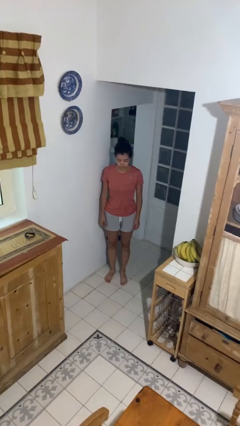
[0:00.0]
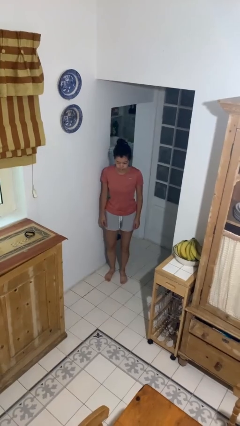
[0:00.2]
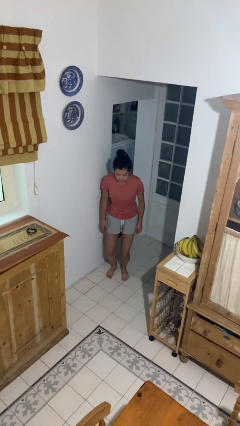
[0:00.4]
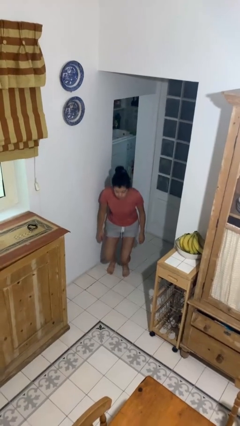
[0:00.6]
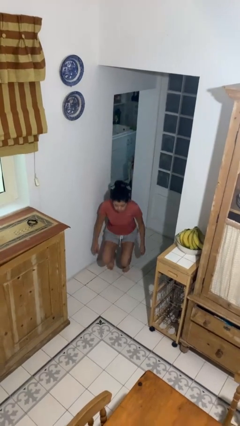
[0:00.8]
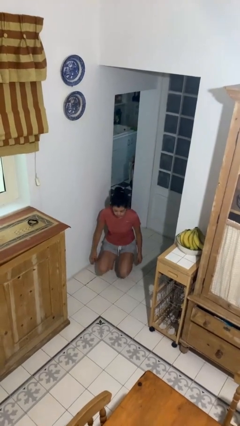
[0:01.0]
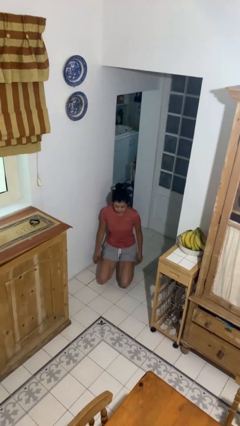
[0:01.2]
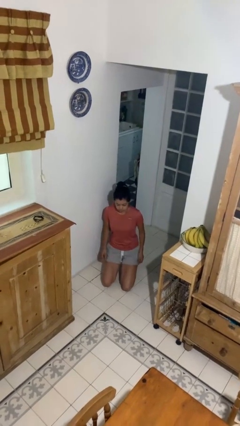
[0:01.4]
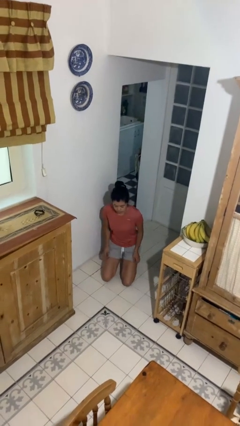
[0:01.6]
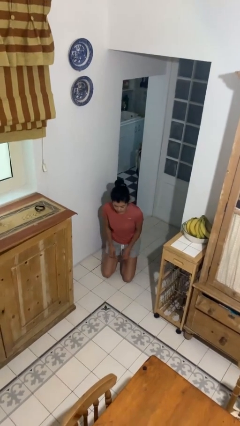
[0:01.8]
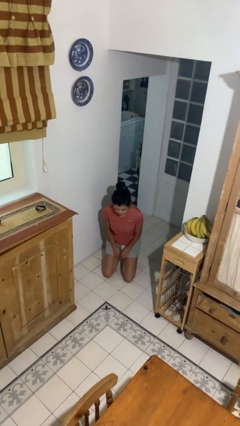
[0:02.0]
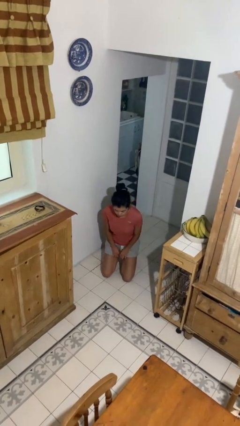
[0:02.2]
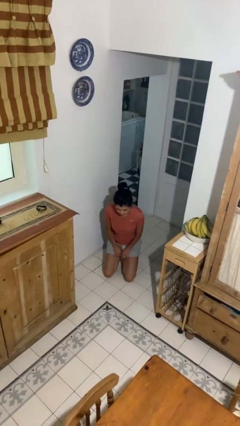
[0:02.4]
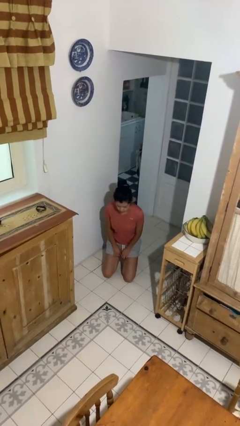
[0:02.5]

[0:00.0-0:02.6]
person kneels

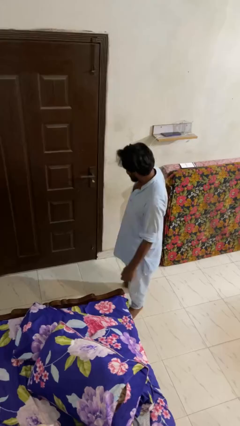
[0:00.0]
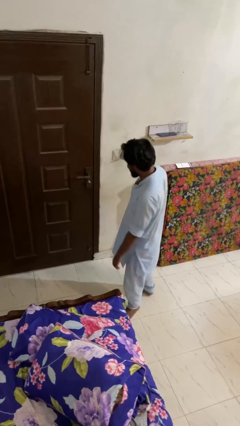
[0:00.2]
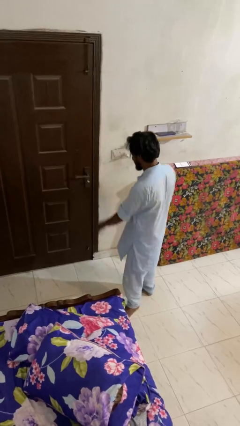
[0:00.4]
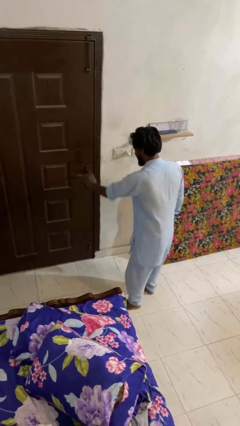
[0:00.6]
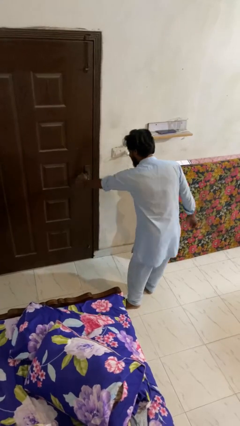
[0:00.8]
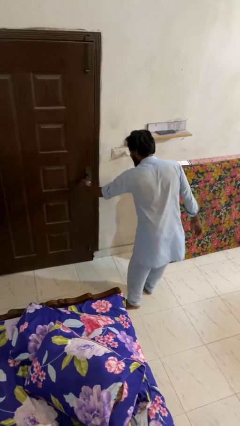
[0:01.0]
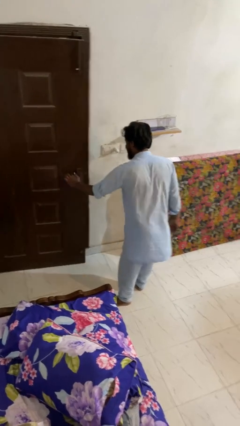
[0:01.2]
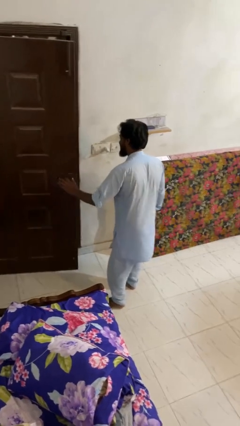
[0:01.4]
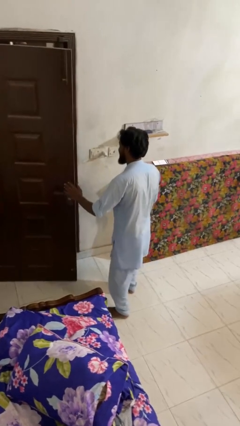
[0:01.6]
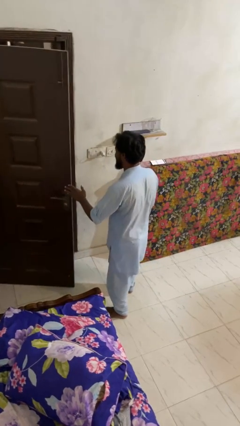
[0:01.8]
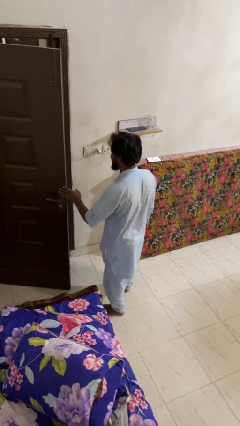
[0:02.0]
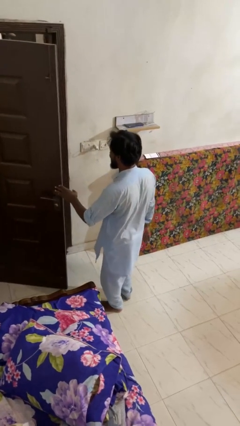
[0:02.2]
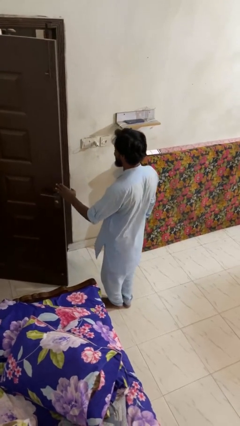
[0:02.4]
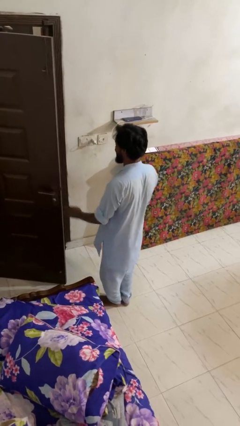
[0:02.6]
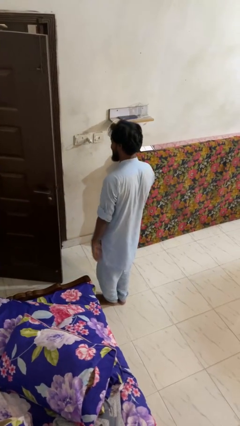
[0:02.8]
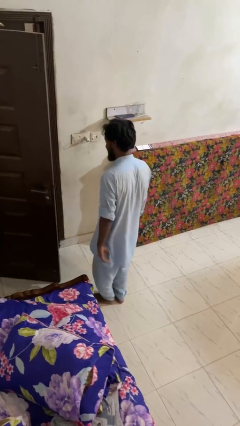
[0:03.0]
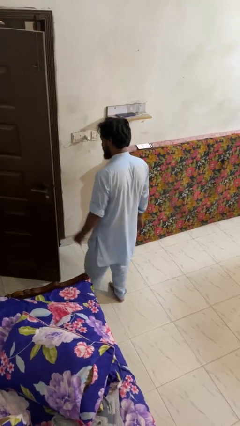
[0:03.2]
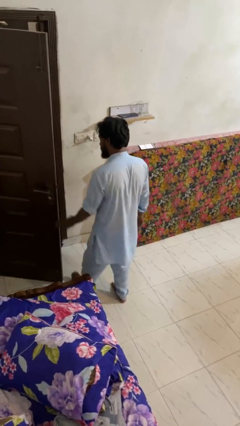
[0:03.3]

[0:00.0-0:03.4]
person opens facility door

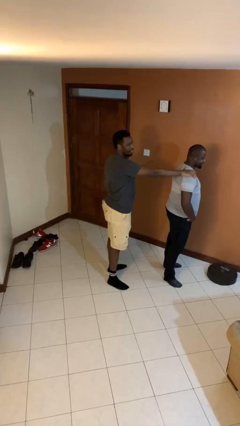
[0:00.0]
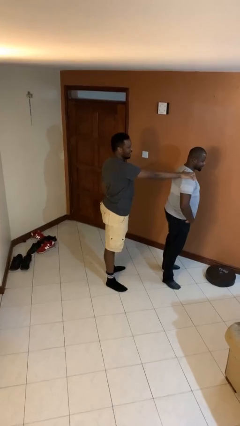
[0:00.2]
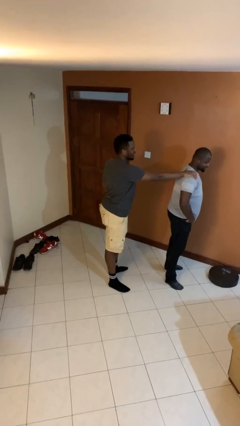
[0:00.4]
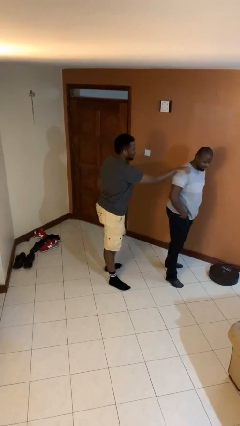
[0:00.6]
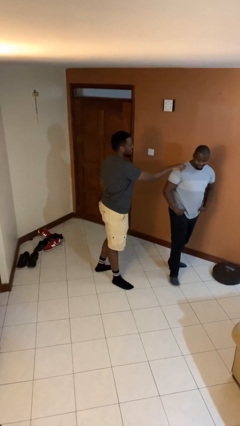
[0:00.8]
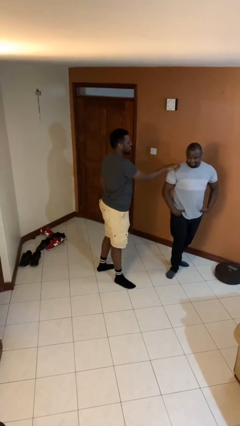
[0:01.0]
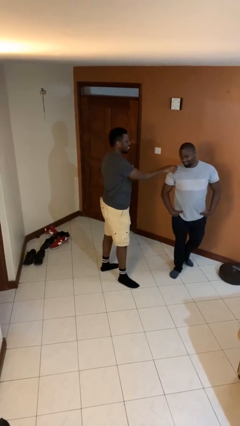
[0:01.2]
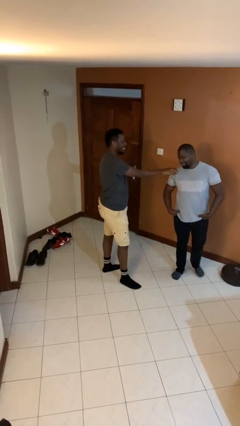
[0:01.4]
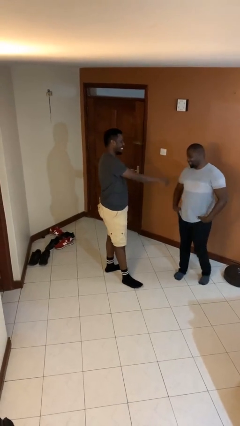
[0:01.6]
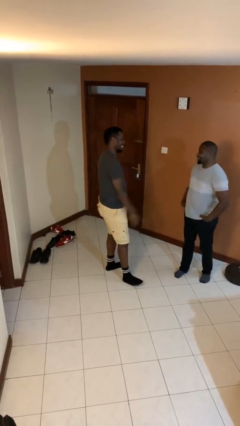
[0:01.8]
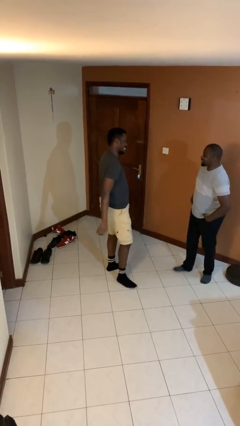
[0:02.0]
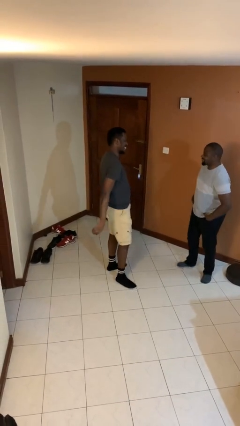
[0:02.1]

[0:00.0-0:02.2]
person spins person around

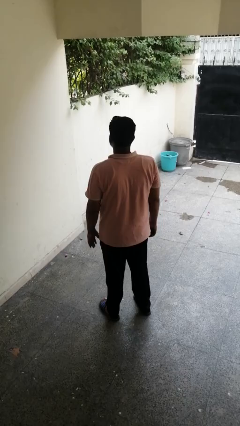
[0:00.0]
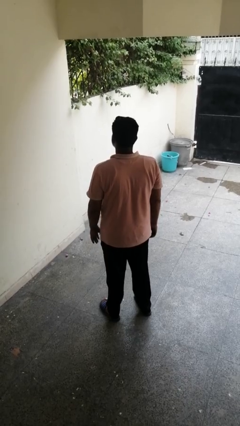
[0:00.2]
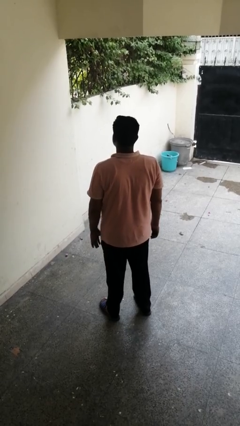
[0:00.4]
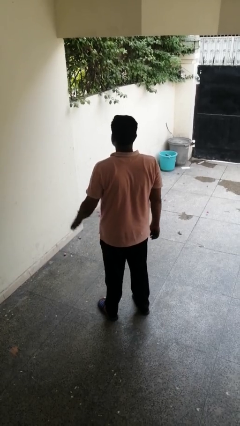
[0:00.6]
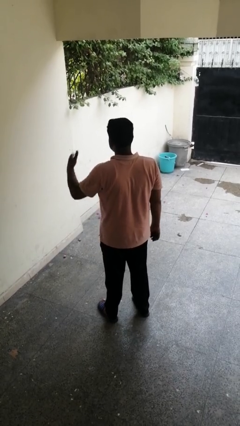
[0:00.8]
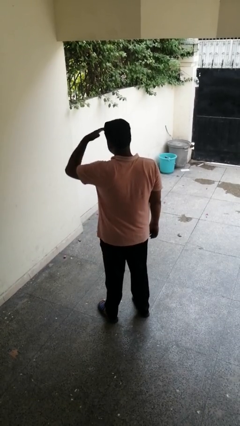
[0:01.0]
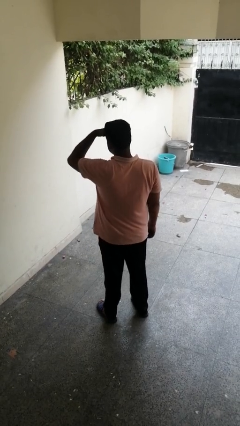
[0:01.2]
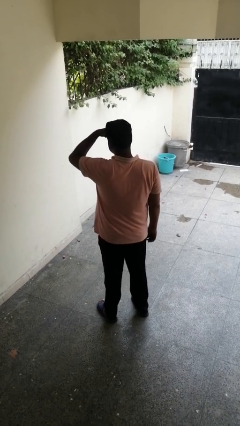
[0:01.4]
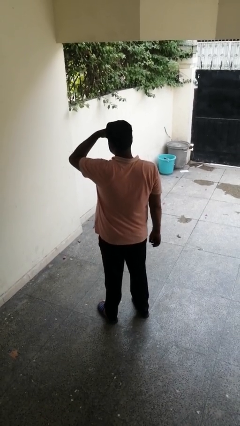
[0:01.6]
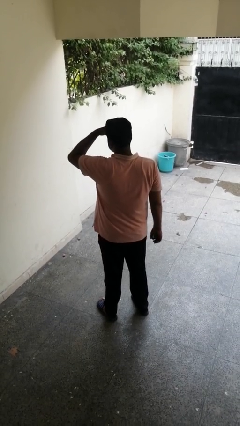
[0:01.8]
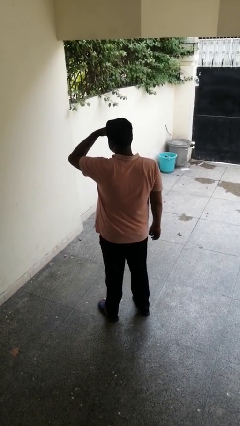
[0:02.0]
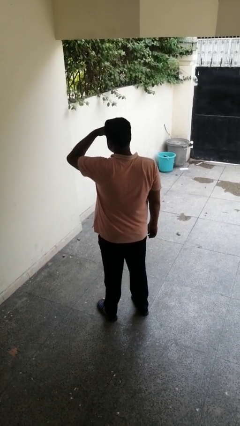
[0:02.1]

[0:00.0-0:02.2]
person shades eyes

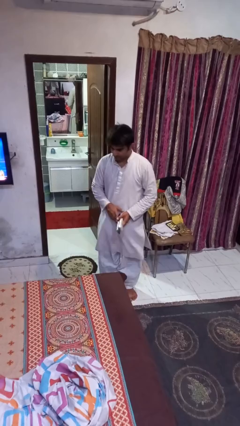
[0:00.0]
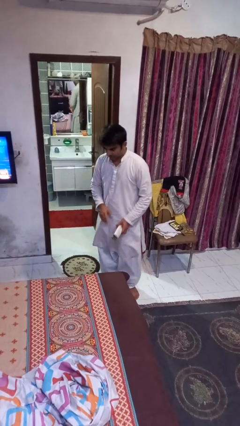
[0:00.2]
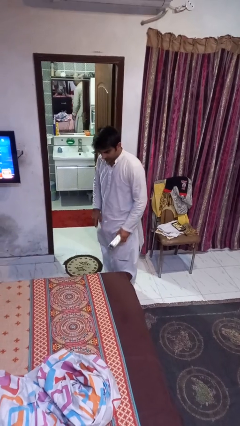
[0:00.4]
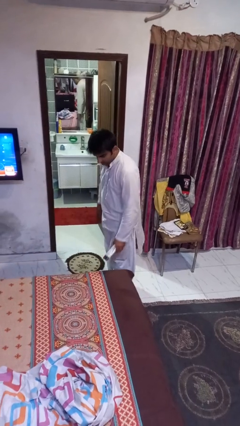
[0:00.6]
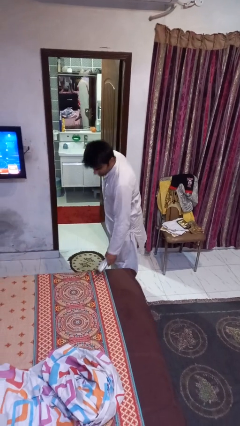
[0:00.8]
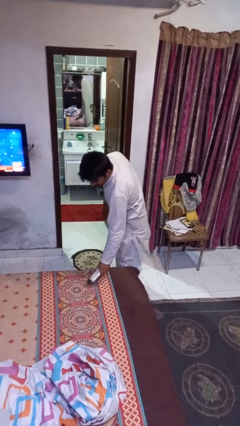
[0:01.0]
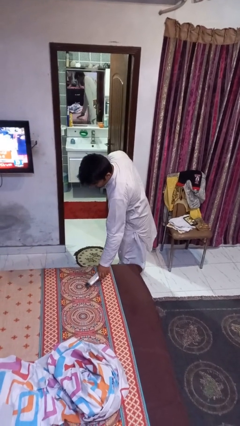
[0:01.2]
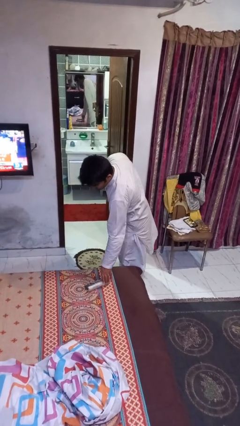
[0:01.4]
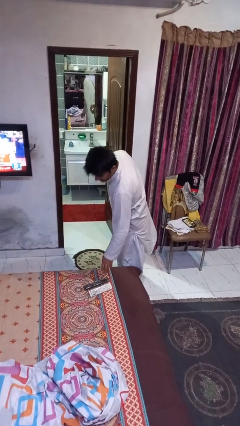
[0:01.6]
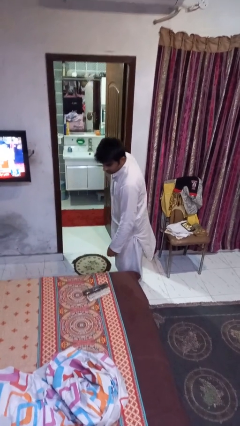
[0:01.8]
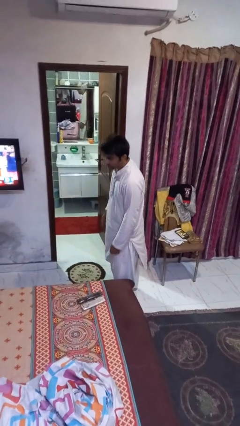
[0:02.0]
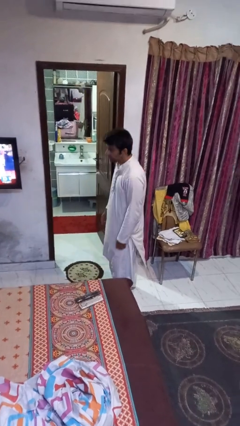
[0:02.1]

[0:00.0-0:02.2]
person puts down object on bed

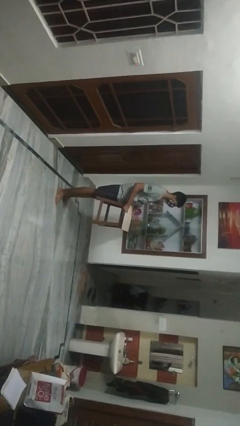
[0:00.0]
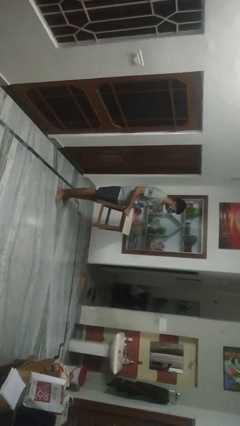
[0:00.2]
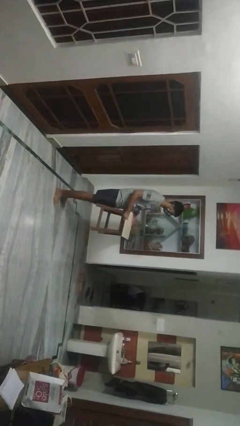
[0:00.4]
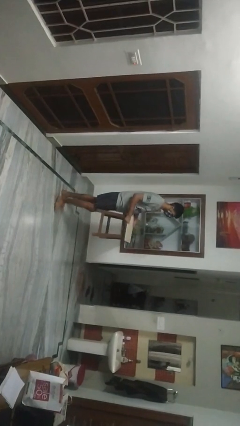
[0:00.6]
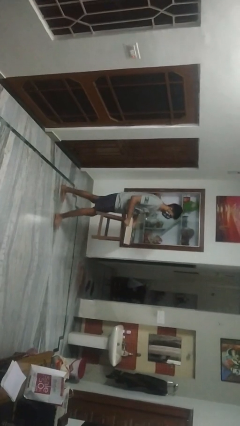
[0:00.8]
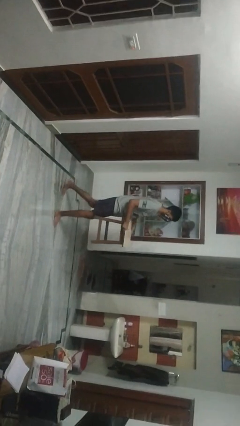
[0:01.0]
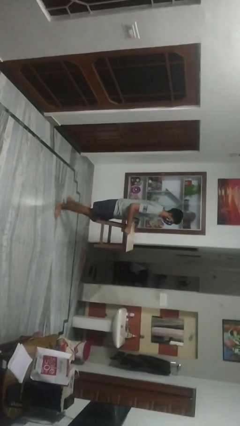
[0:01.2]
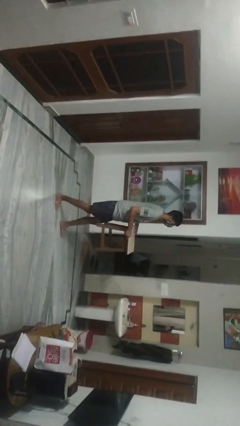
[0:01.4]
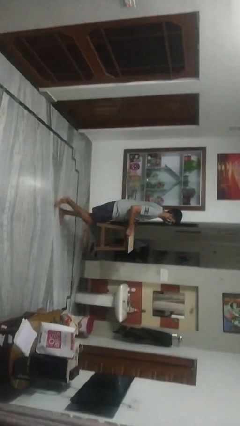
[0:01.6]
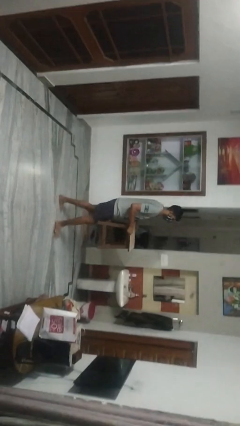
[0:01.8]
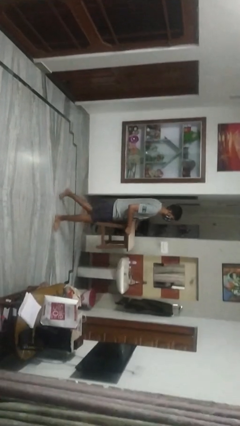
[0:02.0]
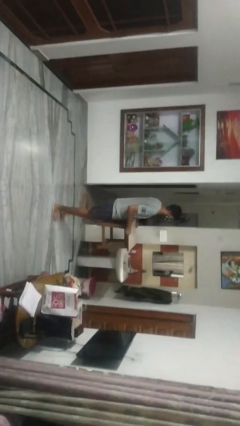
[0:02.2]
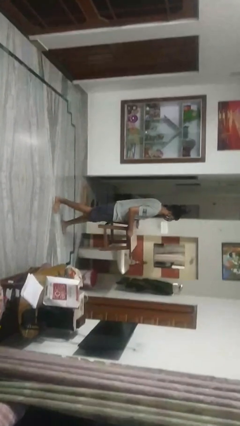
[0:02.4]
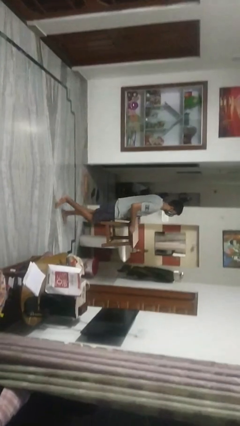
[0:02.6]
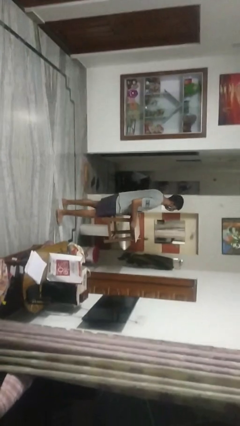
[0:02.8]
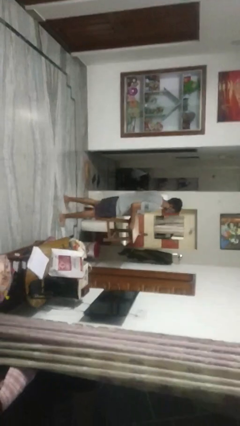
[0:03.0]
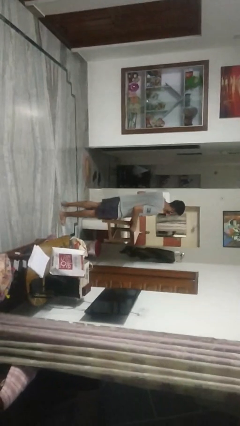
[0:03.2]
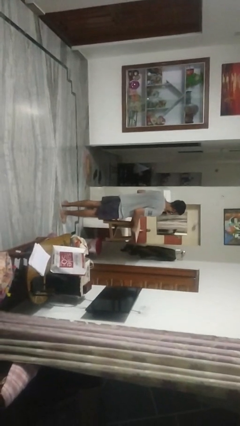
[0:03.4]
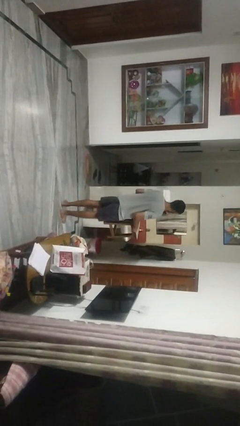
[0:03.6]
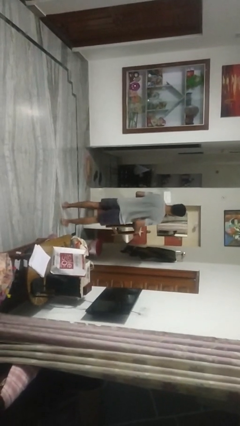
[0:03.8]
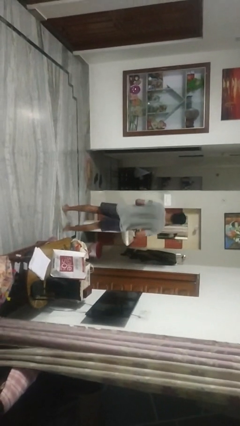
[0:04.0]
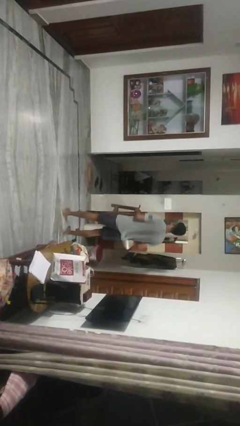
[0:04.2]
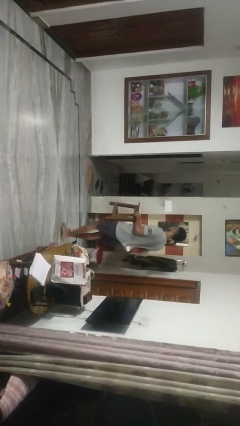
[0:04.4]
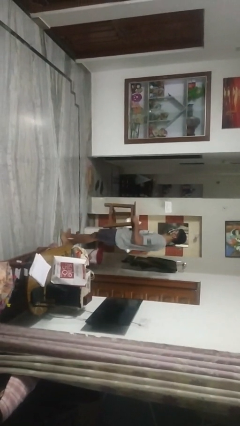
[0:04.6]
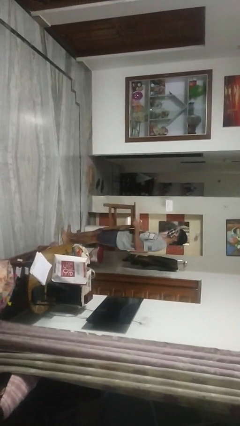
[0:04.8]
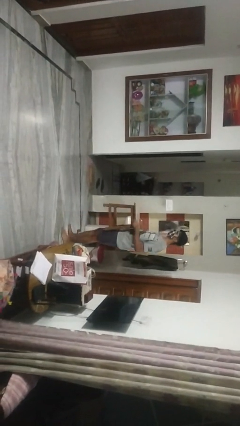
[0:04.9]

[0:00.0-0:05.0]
person carries furniture
